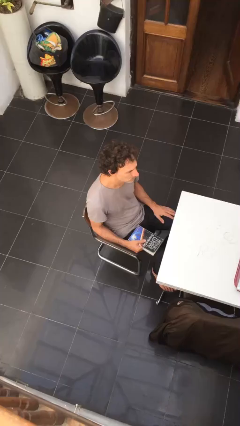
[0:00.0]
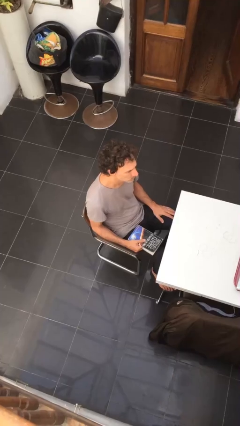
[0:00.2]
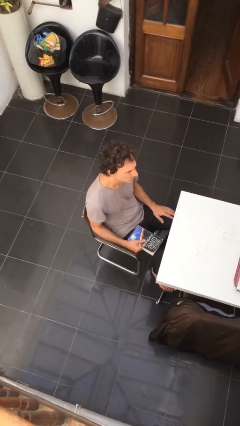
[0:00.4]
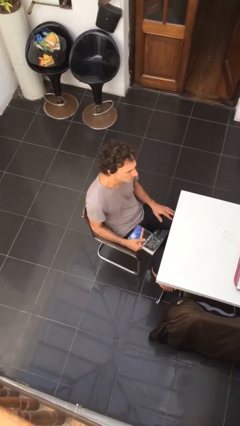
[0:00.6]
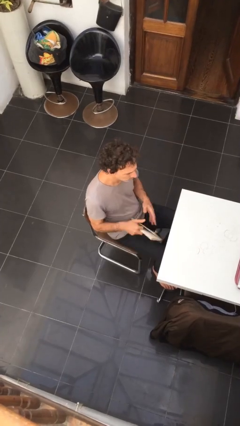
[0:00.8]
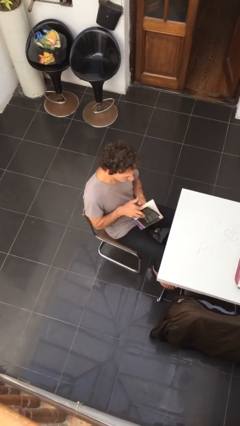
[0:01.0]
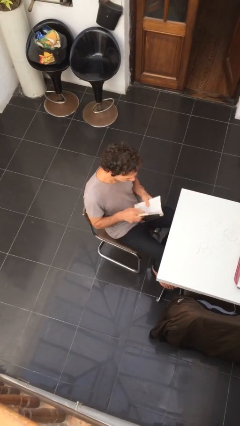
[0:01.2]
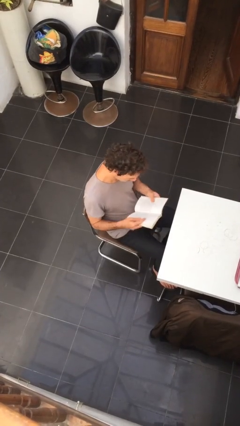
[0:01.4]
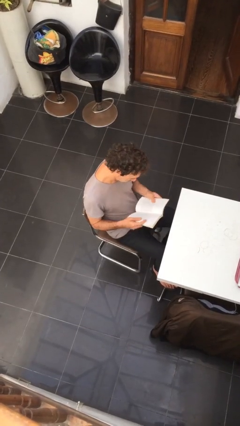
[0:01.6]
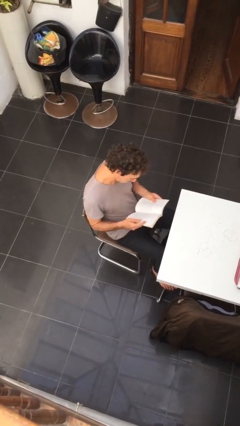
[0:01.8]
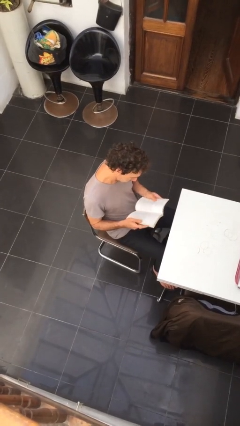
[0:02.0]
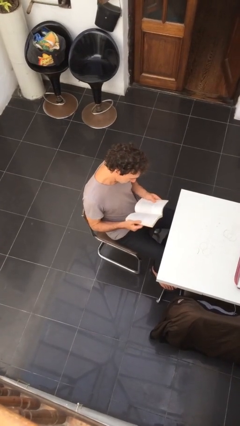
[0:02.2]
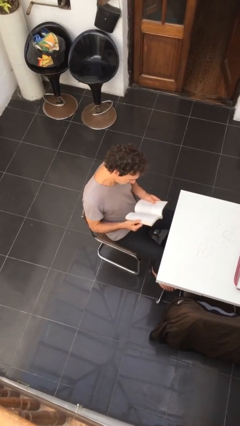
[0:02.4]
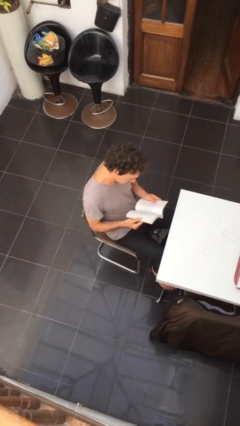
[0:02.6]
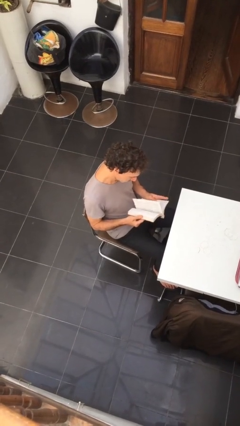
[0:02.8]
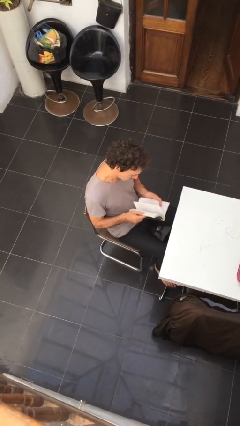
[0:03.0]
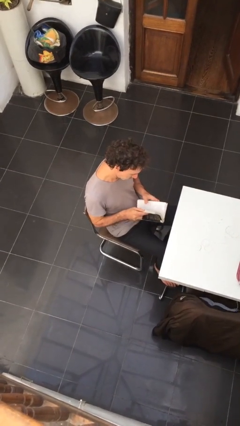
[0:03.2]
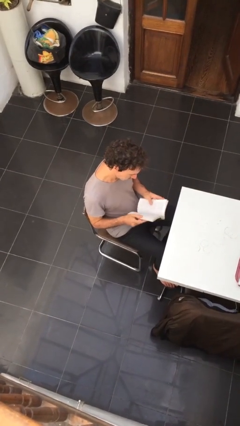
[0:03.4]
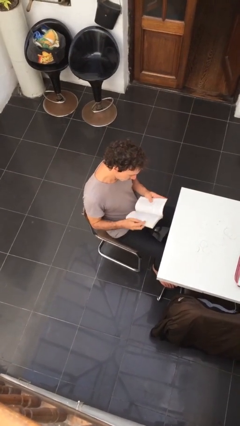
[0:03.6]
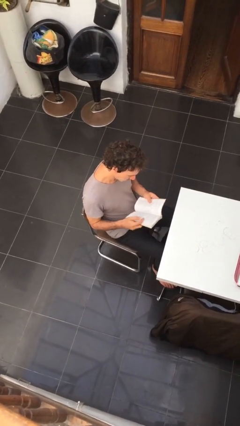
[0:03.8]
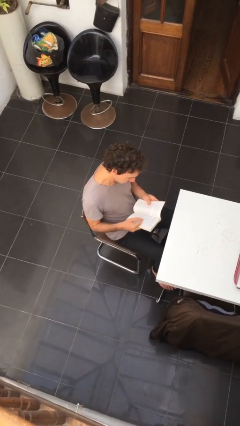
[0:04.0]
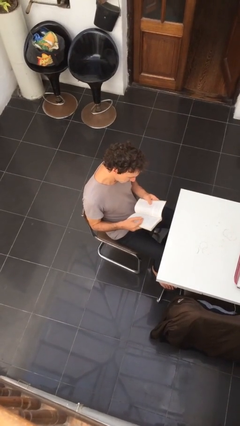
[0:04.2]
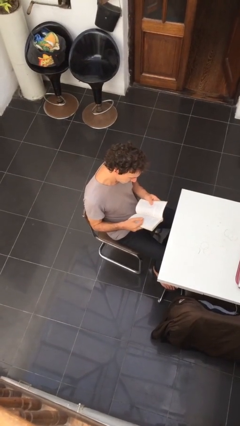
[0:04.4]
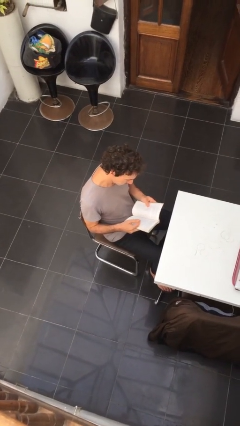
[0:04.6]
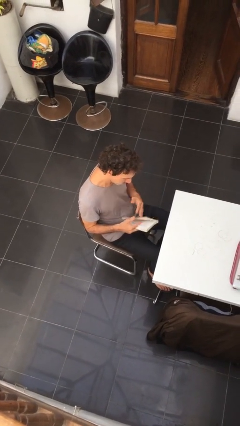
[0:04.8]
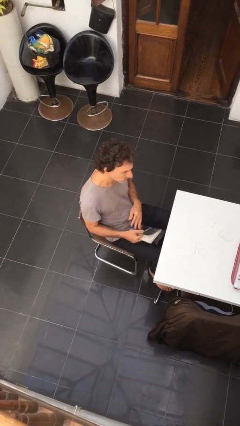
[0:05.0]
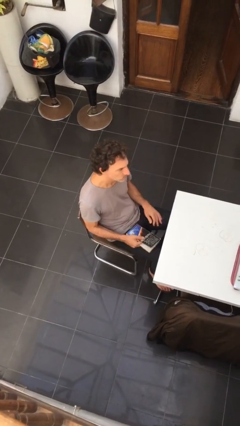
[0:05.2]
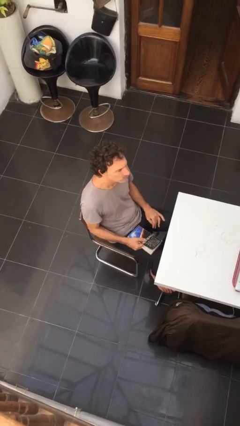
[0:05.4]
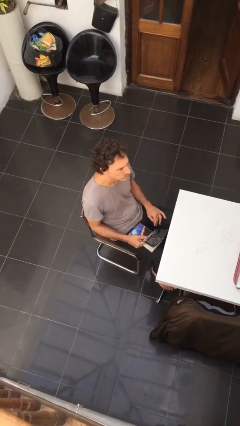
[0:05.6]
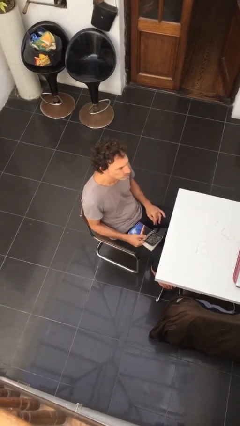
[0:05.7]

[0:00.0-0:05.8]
person reads document

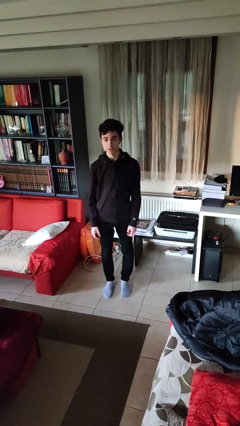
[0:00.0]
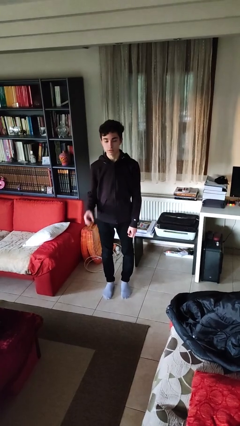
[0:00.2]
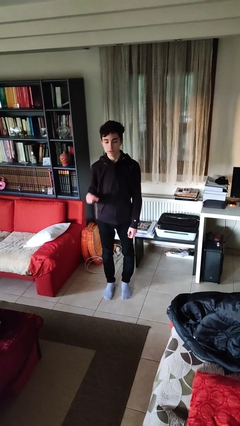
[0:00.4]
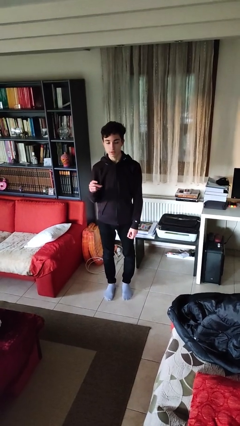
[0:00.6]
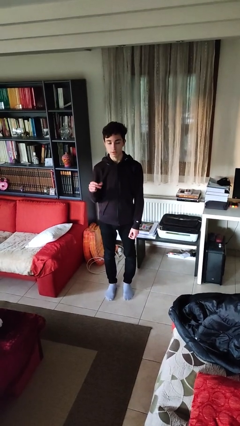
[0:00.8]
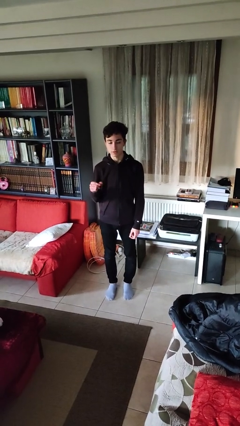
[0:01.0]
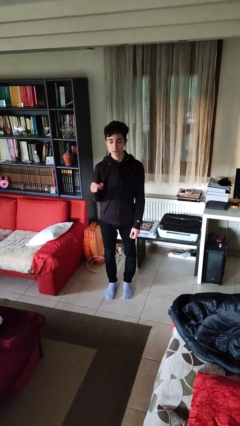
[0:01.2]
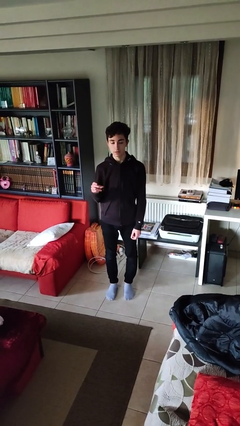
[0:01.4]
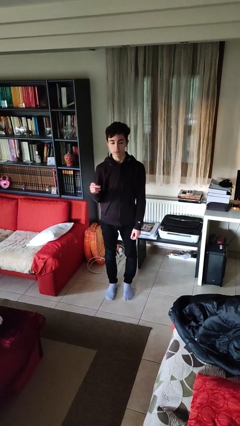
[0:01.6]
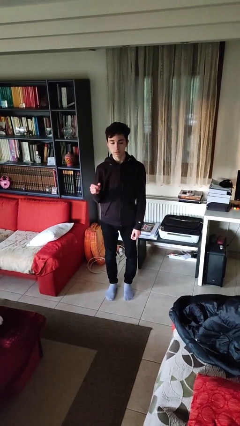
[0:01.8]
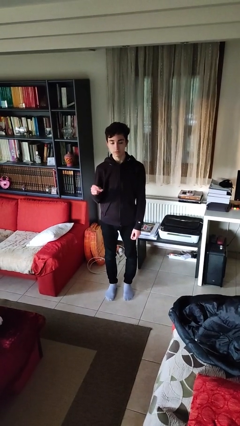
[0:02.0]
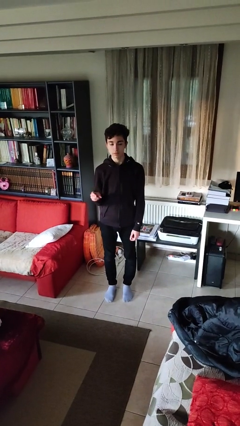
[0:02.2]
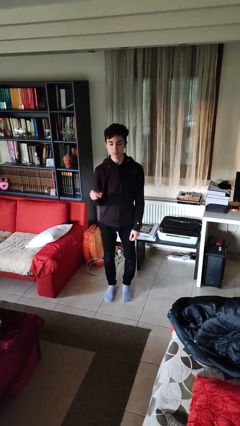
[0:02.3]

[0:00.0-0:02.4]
person snaps fingers

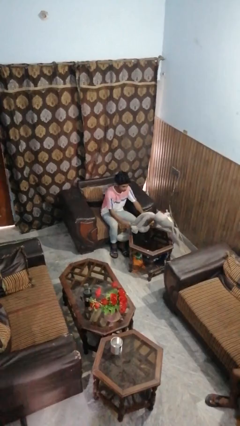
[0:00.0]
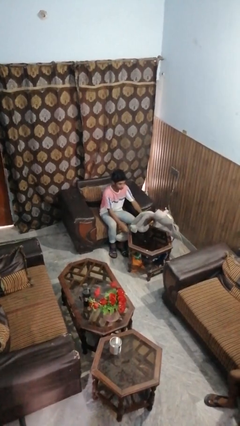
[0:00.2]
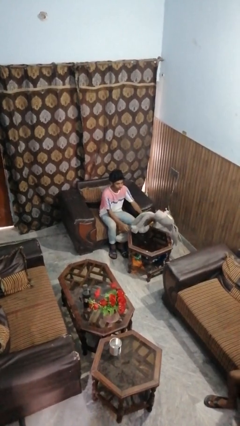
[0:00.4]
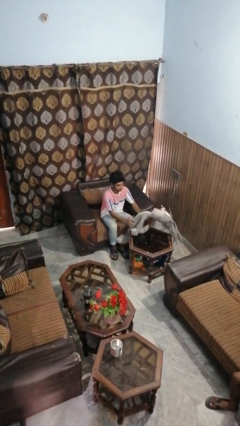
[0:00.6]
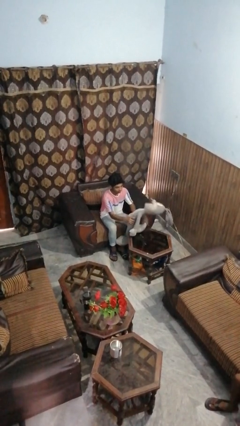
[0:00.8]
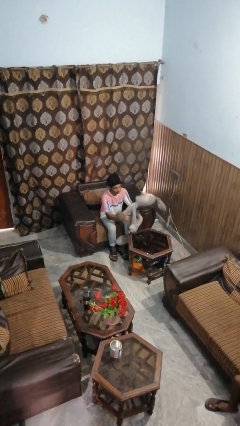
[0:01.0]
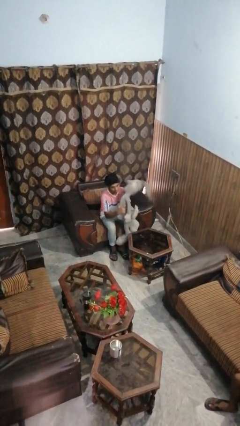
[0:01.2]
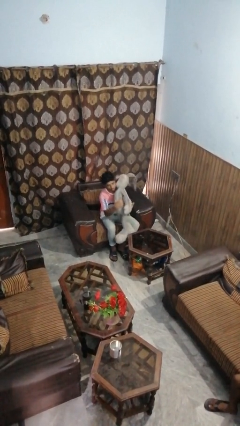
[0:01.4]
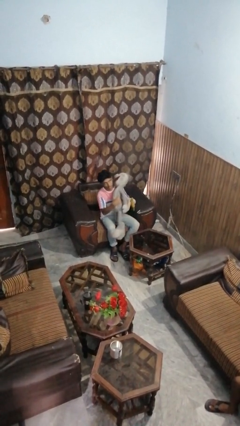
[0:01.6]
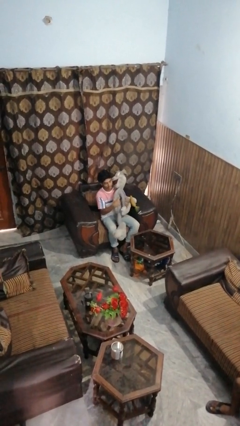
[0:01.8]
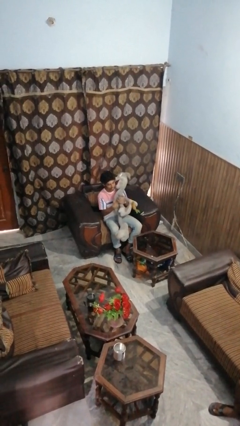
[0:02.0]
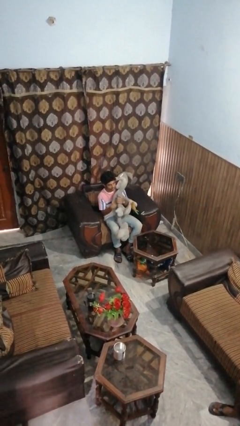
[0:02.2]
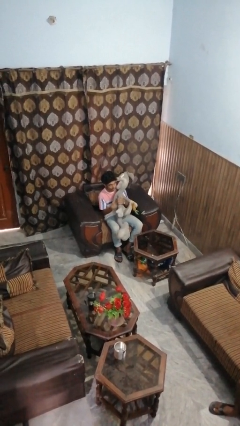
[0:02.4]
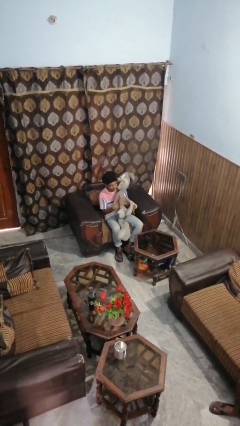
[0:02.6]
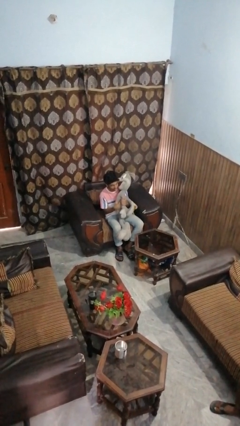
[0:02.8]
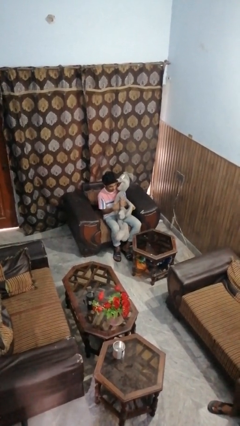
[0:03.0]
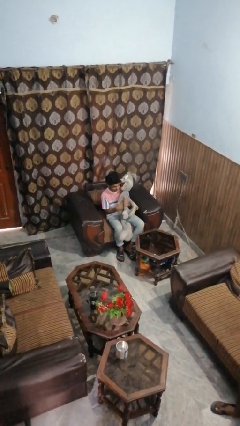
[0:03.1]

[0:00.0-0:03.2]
person hugs stuffed animal

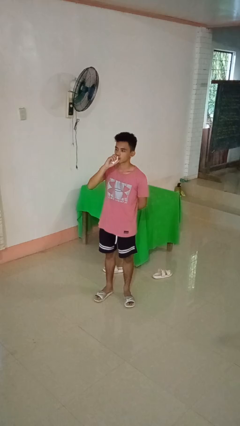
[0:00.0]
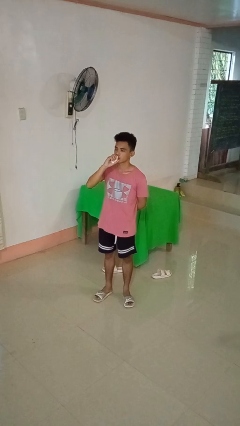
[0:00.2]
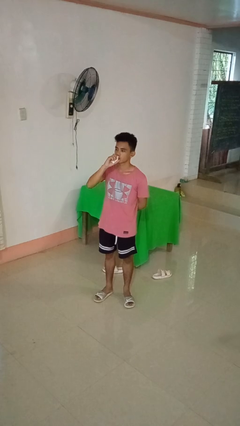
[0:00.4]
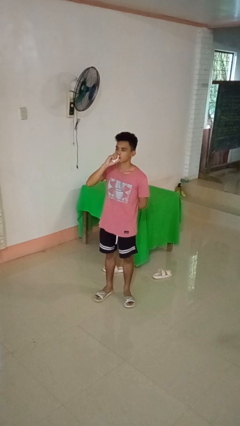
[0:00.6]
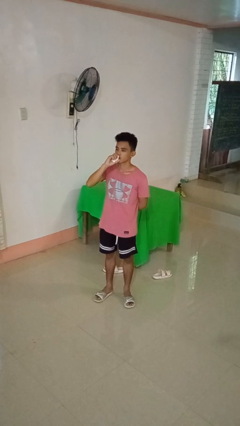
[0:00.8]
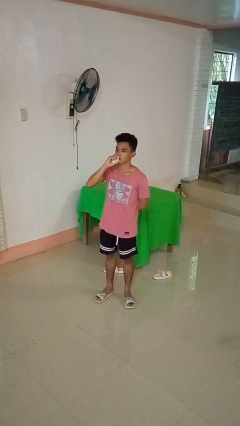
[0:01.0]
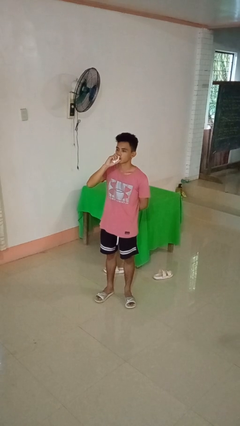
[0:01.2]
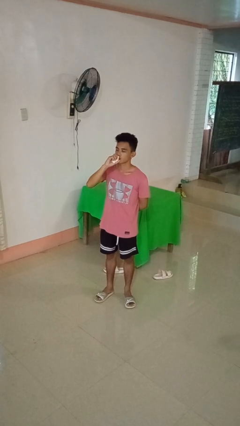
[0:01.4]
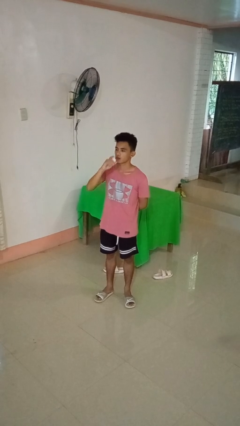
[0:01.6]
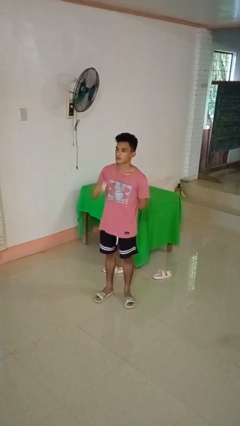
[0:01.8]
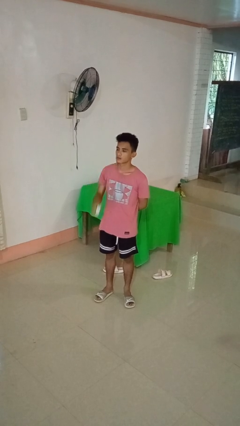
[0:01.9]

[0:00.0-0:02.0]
person vapes

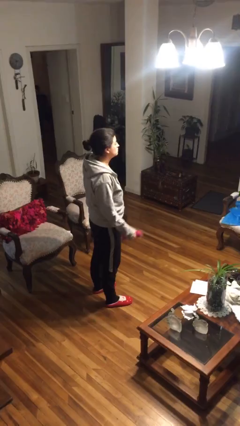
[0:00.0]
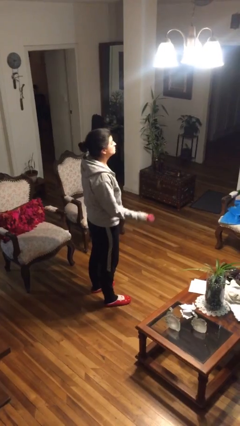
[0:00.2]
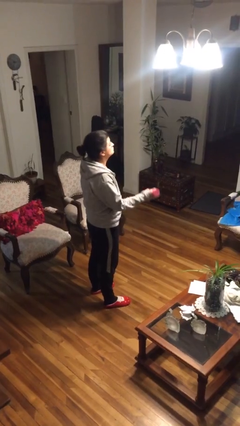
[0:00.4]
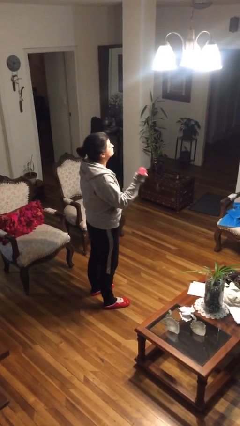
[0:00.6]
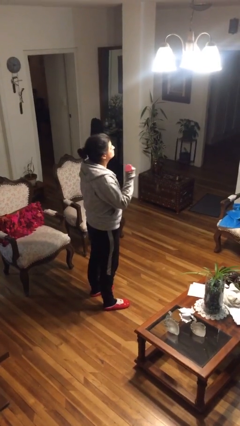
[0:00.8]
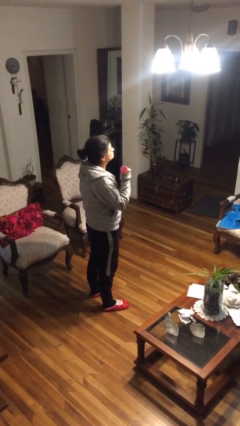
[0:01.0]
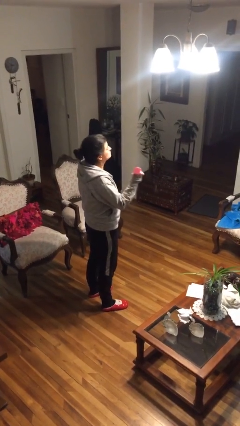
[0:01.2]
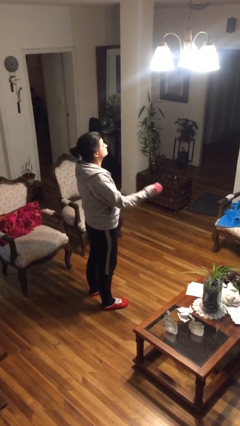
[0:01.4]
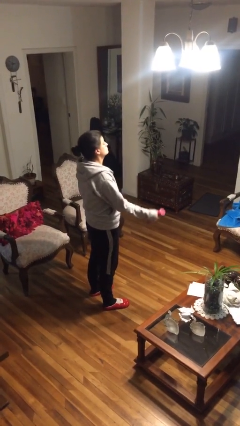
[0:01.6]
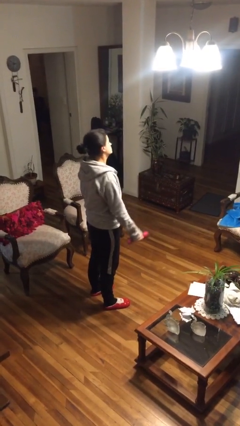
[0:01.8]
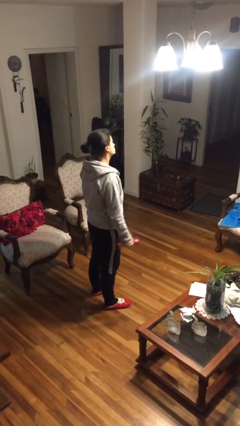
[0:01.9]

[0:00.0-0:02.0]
person lifts dumbbells

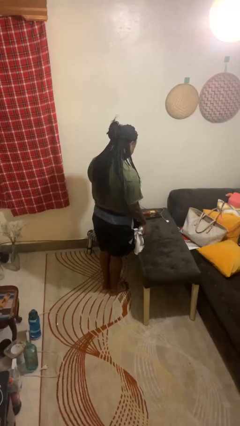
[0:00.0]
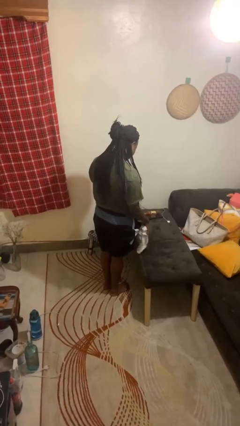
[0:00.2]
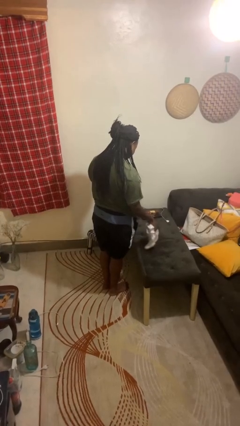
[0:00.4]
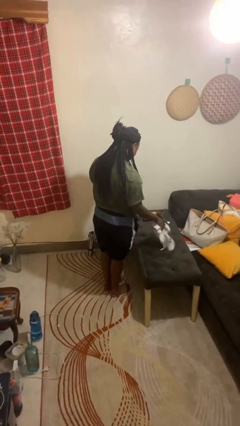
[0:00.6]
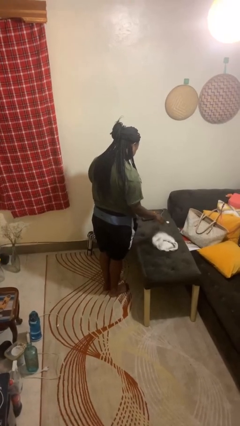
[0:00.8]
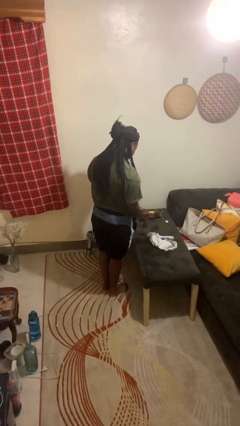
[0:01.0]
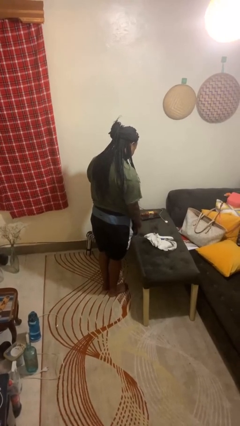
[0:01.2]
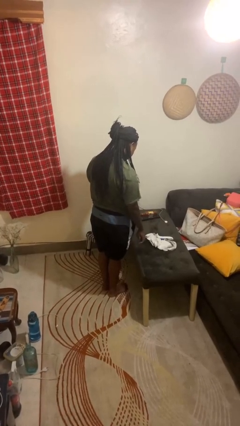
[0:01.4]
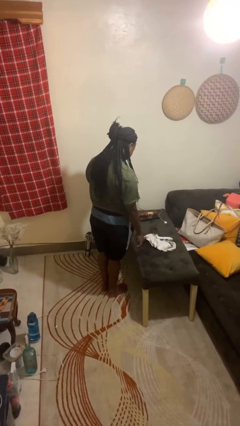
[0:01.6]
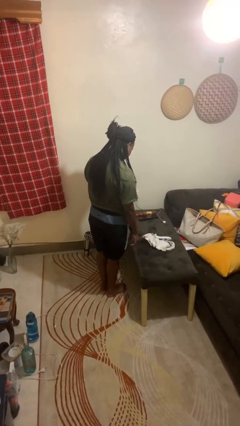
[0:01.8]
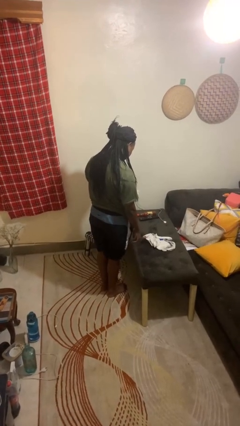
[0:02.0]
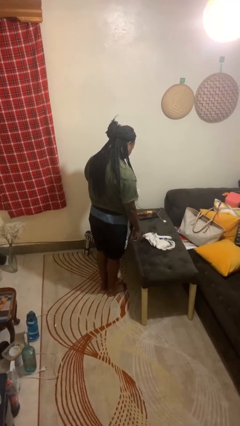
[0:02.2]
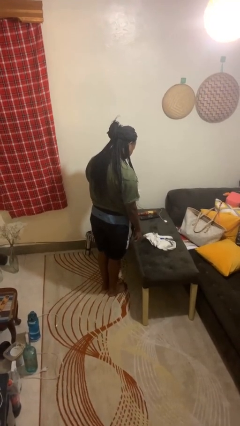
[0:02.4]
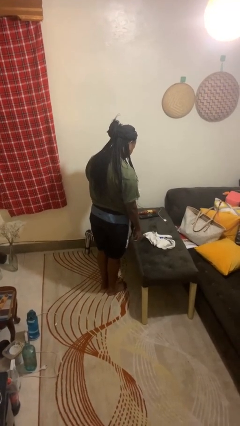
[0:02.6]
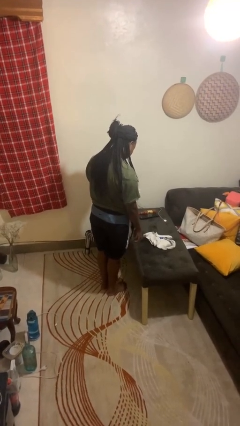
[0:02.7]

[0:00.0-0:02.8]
person throws object on table
